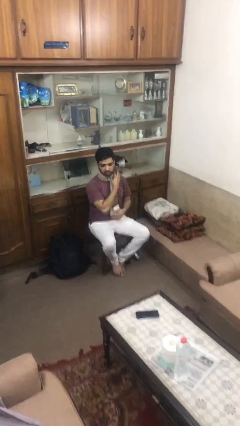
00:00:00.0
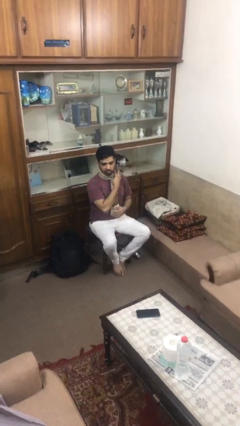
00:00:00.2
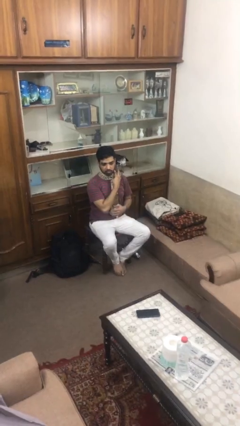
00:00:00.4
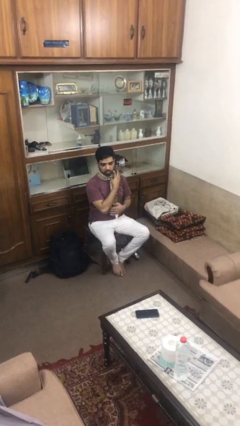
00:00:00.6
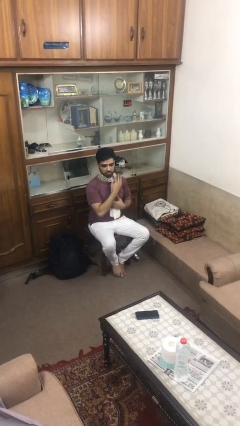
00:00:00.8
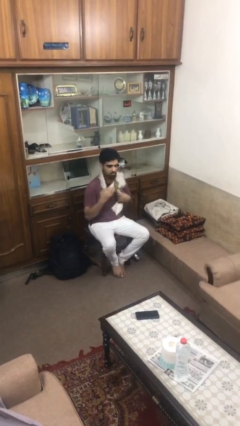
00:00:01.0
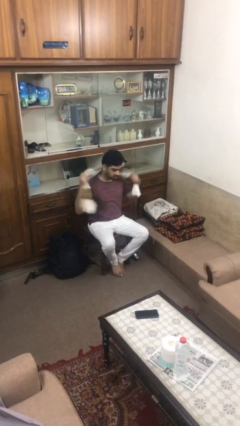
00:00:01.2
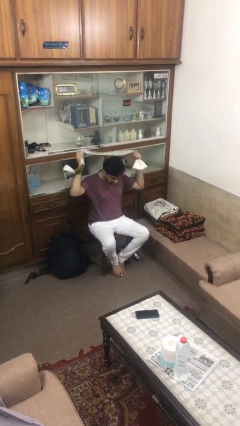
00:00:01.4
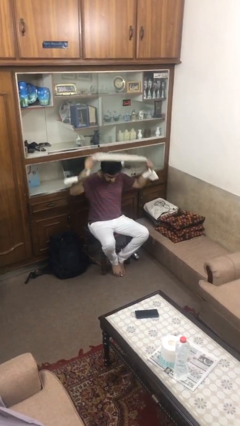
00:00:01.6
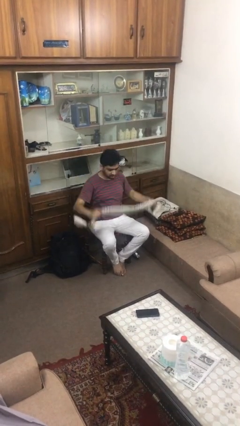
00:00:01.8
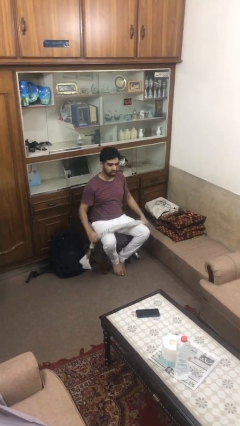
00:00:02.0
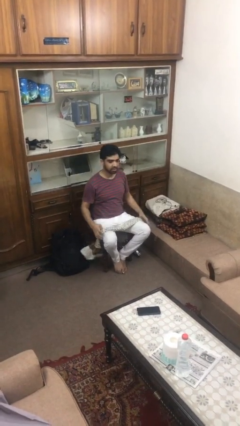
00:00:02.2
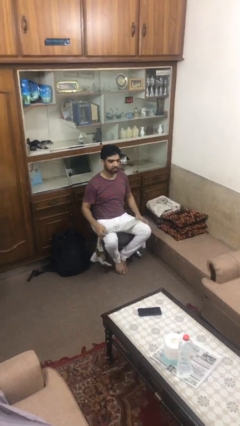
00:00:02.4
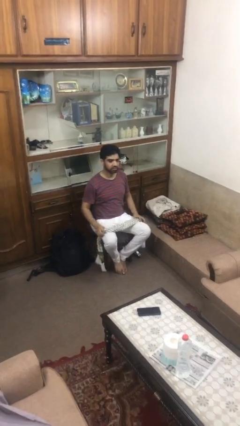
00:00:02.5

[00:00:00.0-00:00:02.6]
person takes off scarf

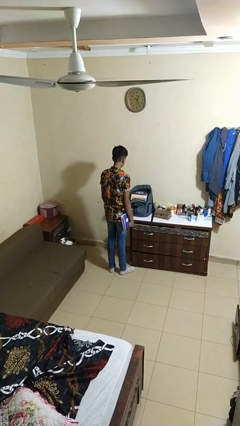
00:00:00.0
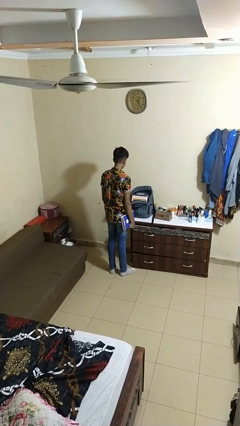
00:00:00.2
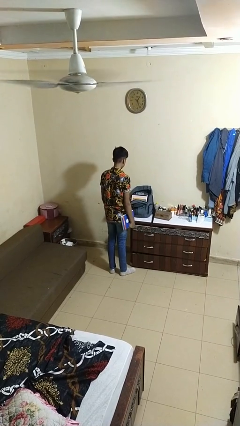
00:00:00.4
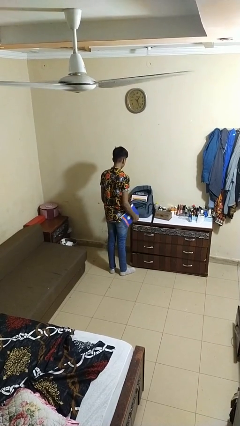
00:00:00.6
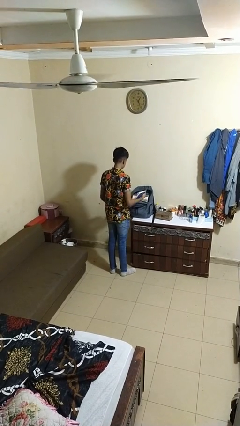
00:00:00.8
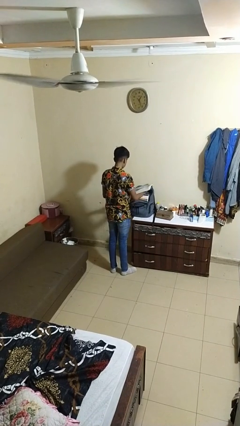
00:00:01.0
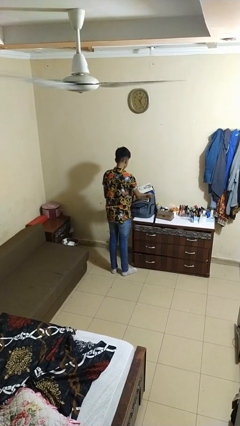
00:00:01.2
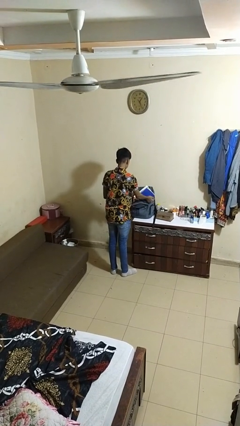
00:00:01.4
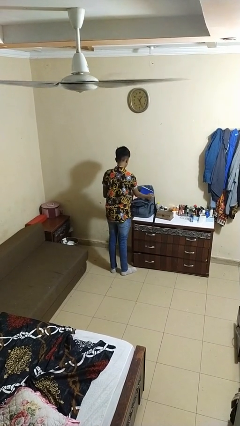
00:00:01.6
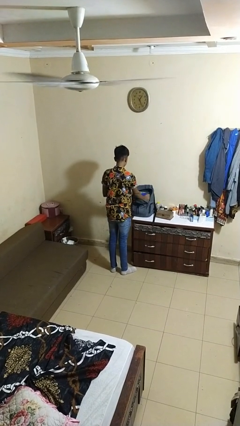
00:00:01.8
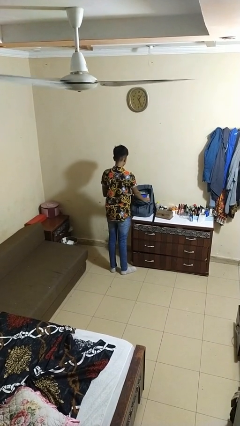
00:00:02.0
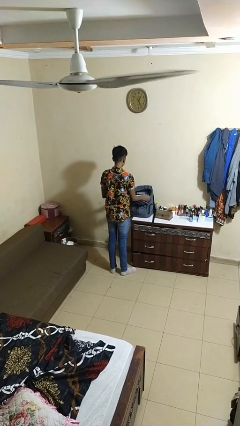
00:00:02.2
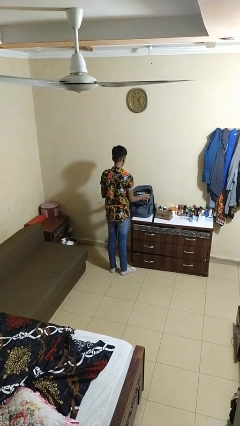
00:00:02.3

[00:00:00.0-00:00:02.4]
person puts object into backpack

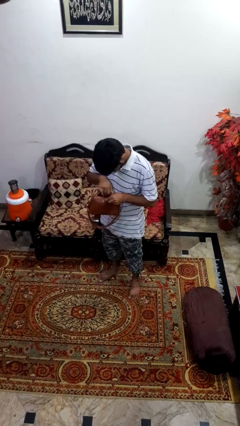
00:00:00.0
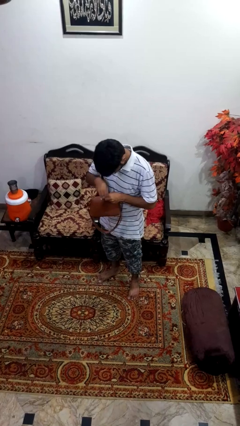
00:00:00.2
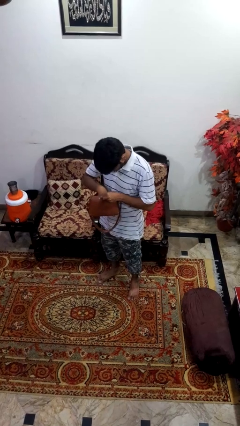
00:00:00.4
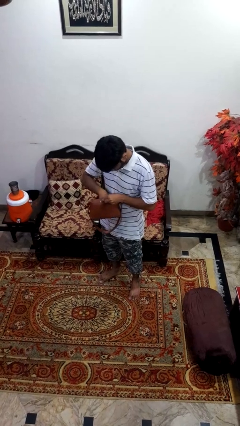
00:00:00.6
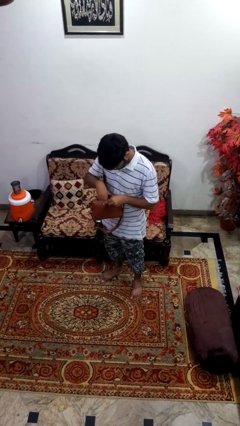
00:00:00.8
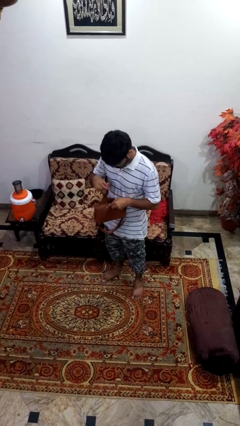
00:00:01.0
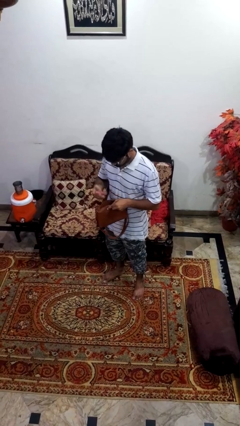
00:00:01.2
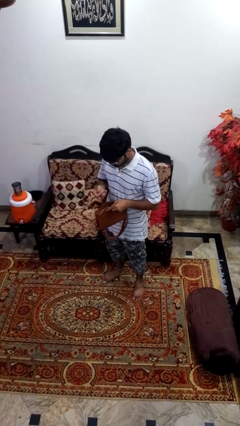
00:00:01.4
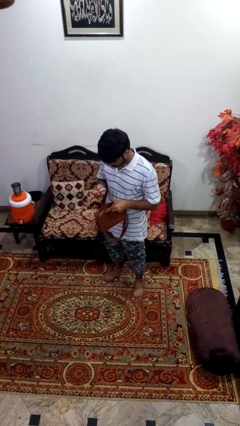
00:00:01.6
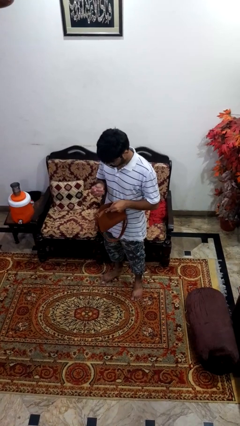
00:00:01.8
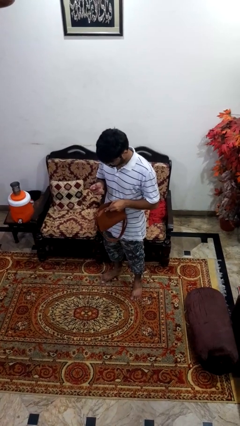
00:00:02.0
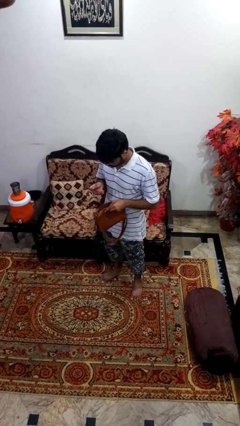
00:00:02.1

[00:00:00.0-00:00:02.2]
person takes object from purse

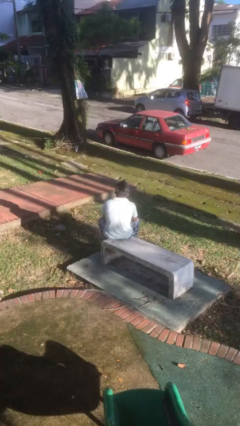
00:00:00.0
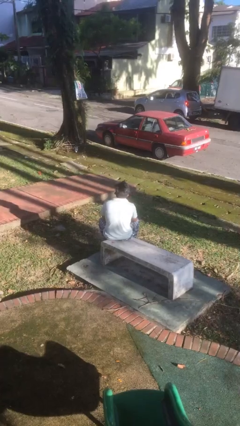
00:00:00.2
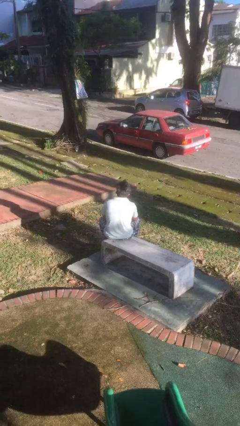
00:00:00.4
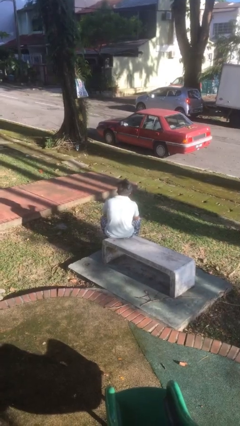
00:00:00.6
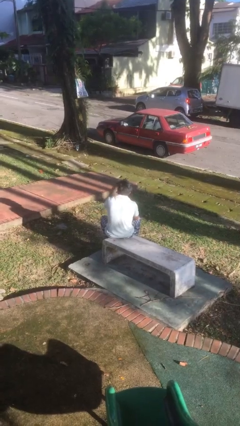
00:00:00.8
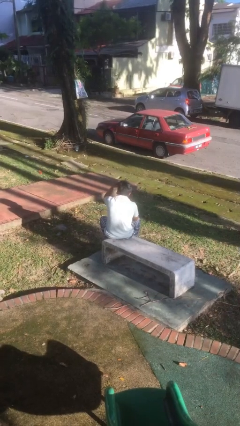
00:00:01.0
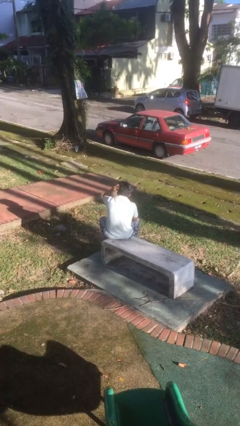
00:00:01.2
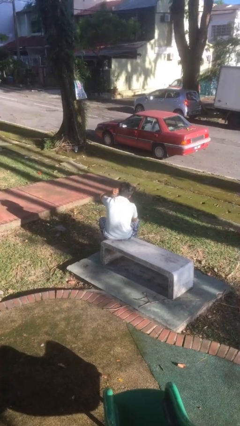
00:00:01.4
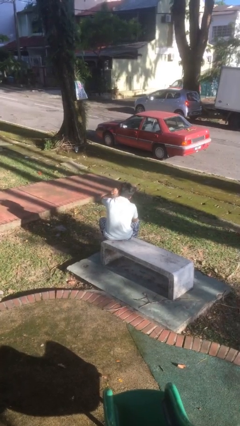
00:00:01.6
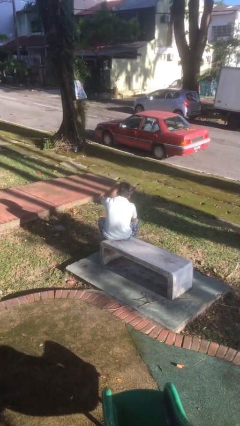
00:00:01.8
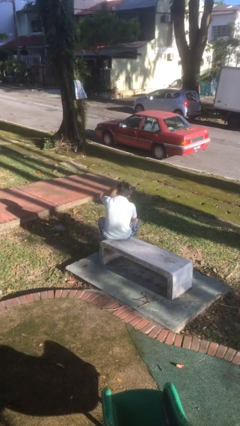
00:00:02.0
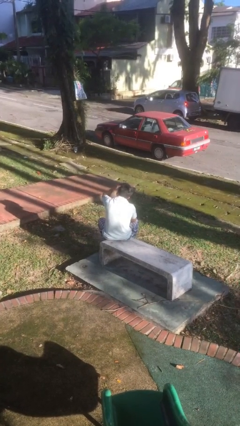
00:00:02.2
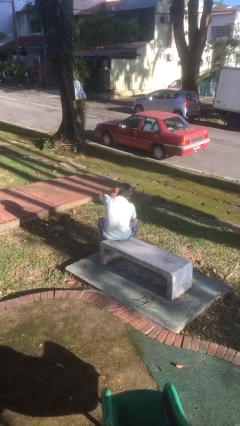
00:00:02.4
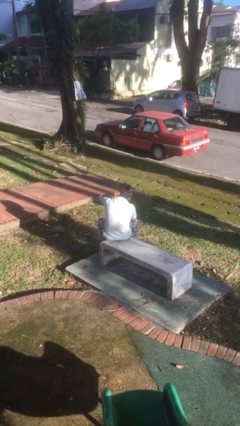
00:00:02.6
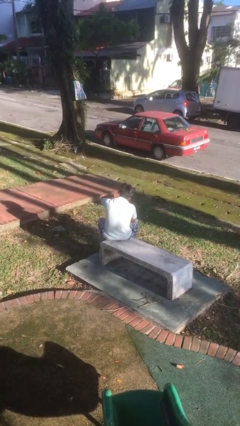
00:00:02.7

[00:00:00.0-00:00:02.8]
person strokes hair

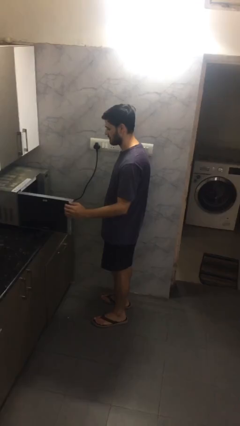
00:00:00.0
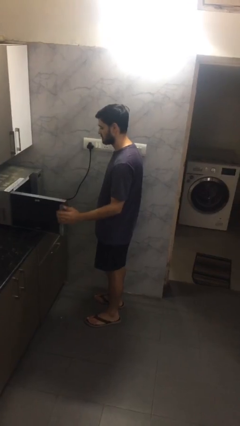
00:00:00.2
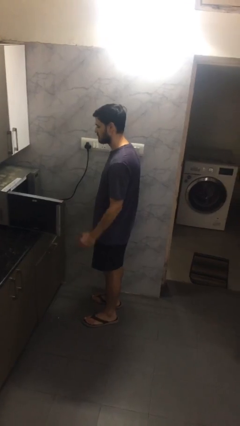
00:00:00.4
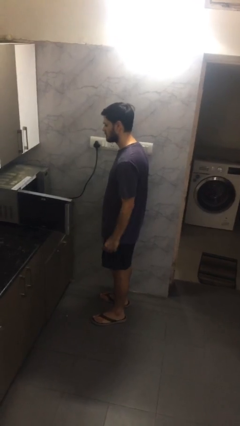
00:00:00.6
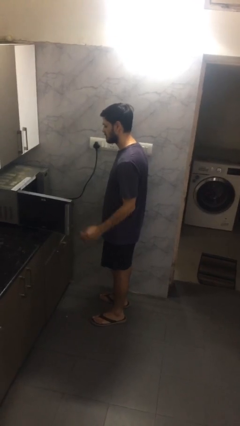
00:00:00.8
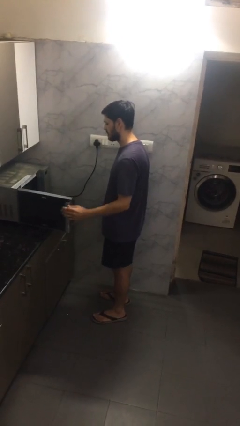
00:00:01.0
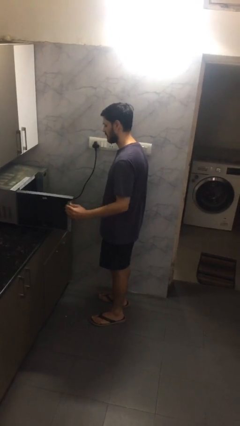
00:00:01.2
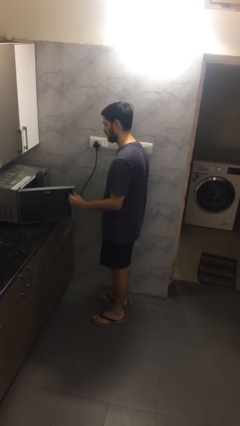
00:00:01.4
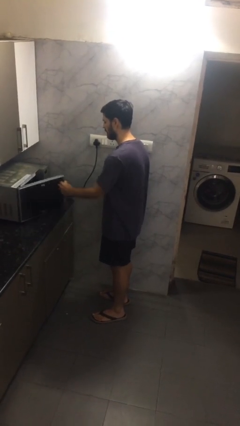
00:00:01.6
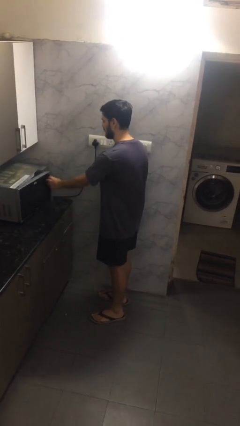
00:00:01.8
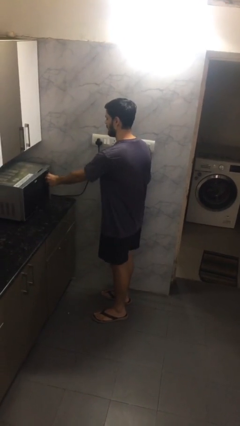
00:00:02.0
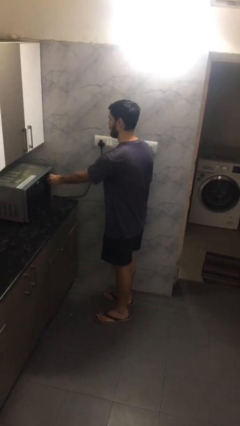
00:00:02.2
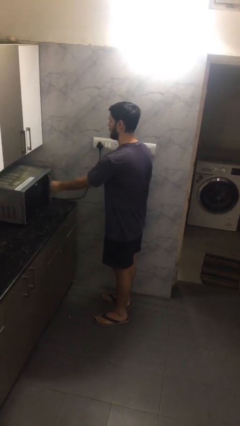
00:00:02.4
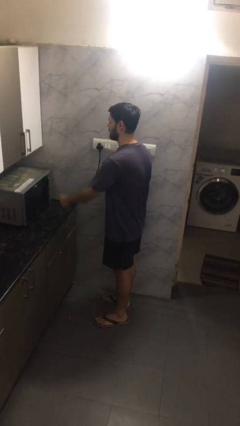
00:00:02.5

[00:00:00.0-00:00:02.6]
person closes microwave

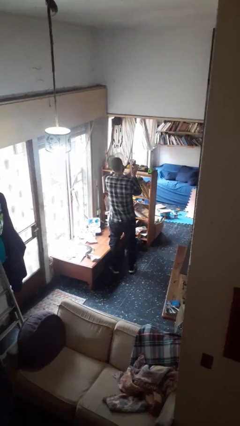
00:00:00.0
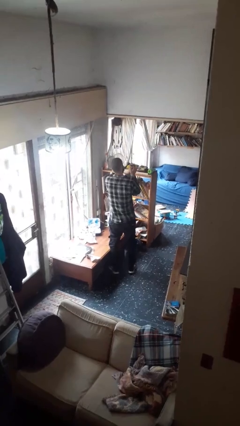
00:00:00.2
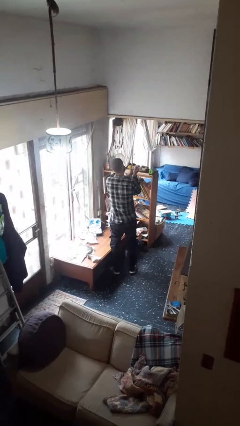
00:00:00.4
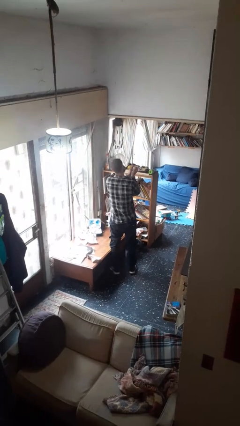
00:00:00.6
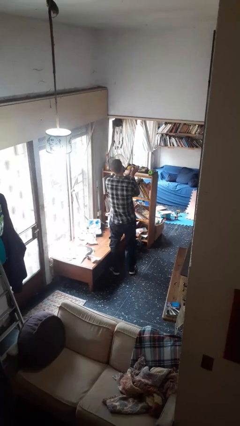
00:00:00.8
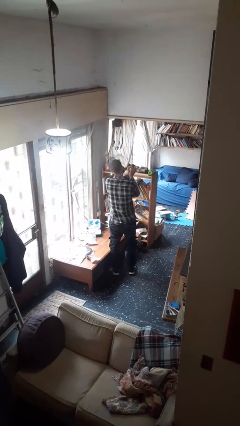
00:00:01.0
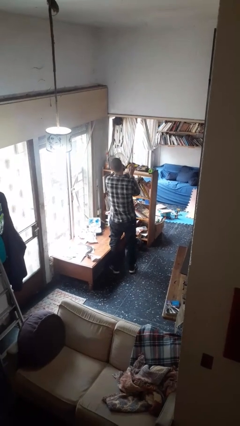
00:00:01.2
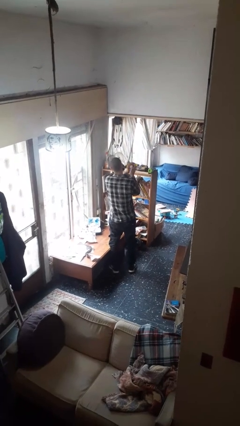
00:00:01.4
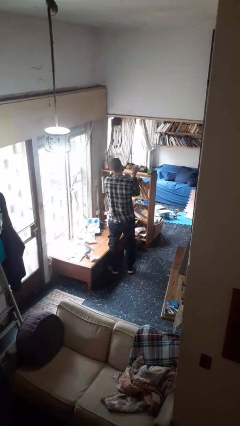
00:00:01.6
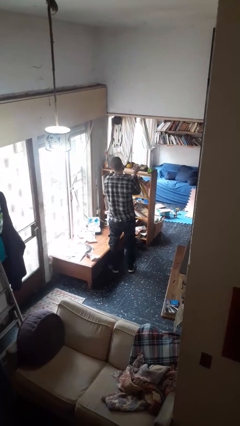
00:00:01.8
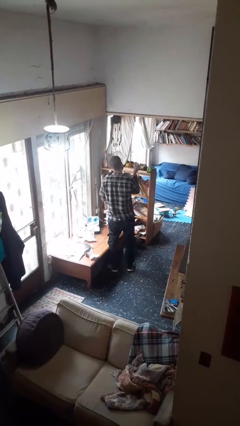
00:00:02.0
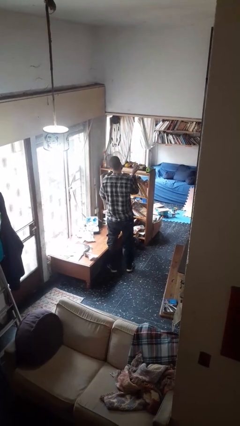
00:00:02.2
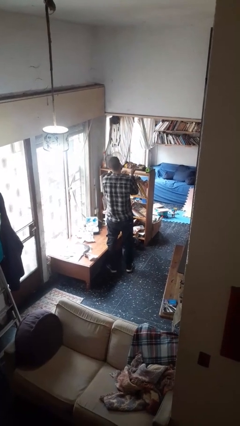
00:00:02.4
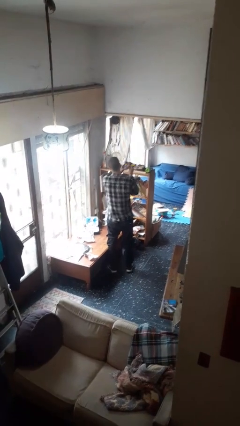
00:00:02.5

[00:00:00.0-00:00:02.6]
person crumples paper

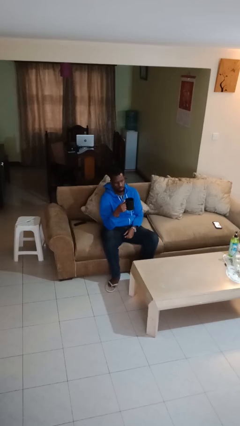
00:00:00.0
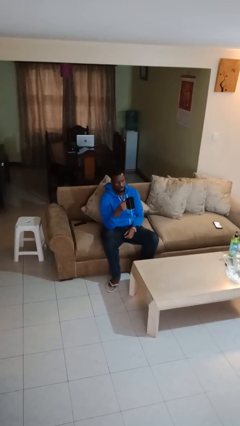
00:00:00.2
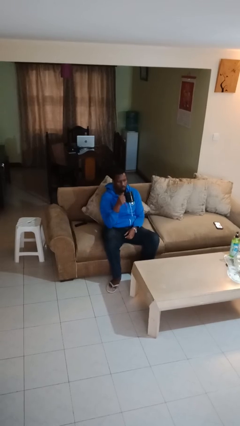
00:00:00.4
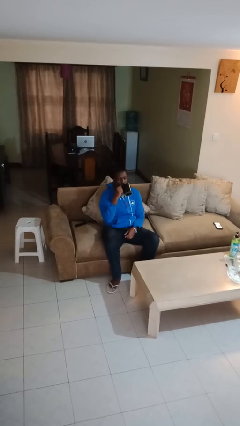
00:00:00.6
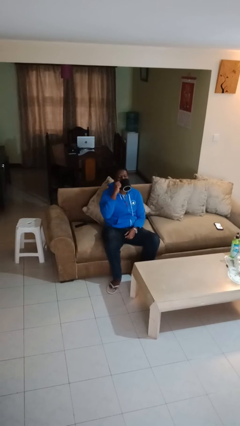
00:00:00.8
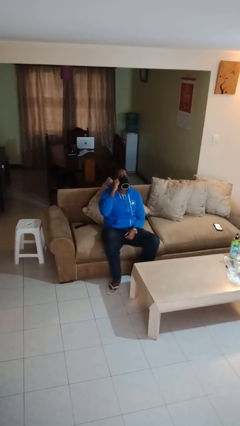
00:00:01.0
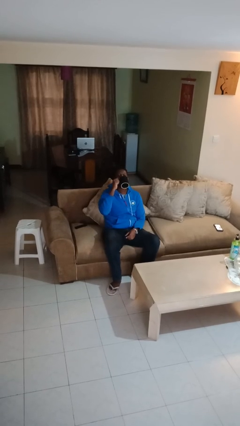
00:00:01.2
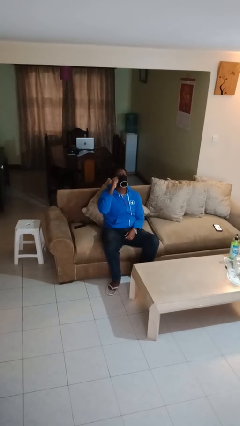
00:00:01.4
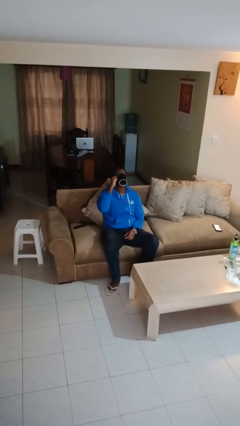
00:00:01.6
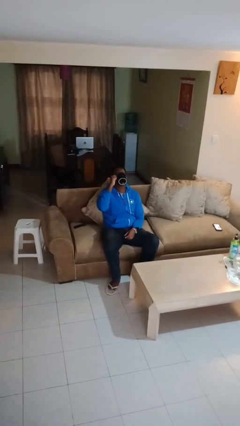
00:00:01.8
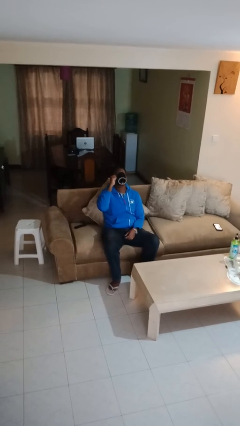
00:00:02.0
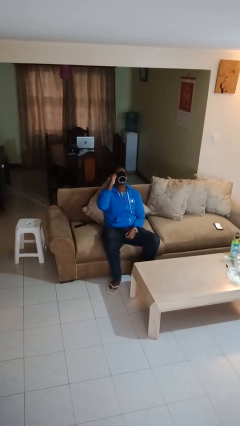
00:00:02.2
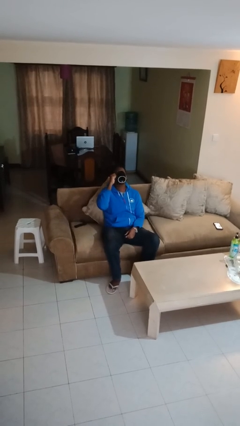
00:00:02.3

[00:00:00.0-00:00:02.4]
person drinks from mug
